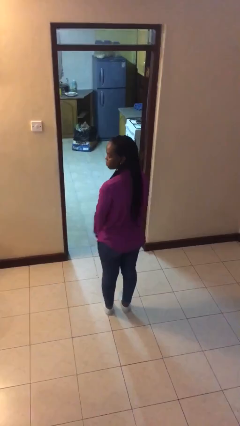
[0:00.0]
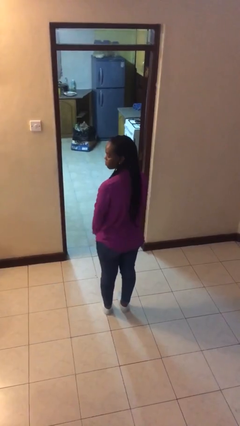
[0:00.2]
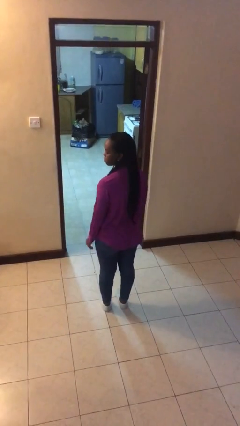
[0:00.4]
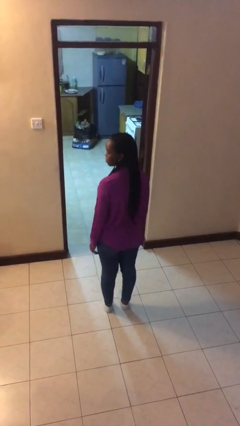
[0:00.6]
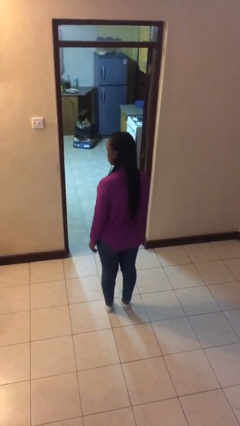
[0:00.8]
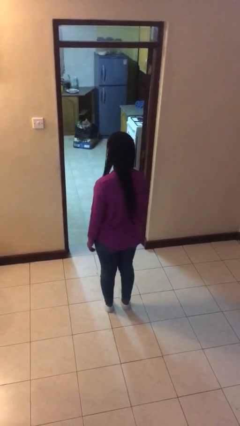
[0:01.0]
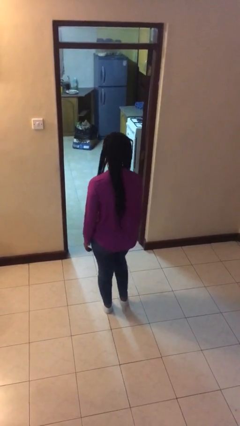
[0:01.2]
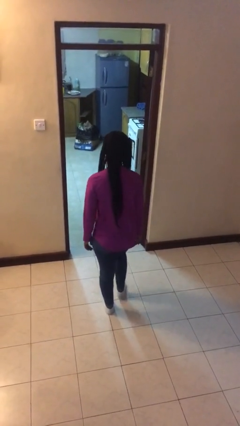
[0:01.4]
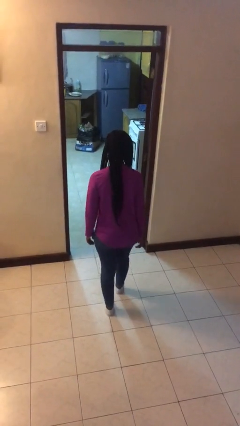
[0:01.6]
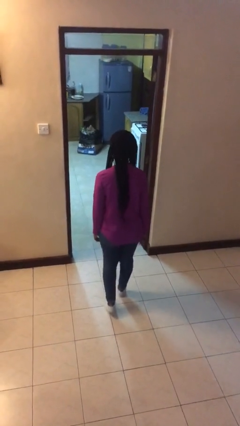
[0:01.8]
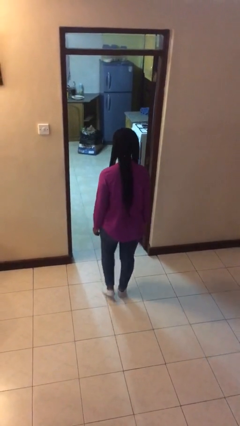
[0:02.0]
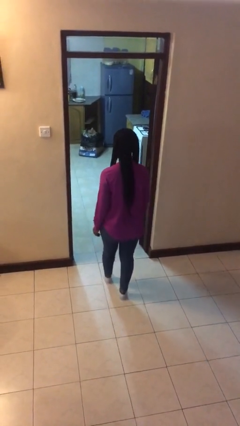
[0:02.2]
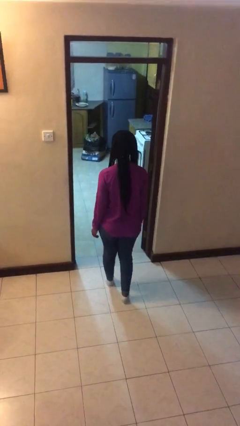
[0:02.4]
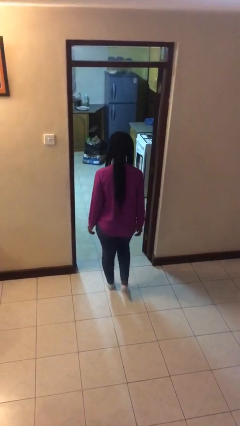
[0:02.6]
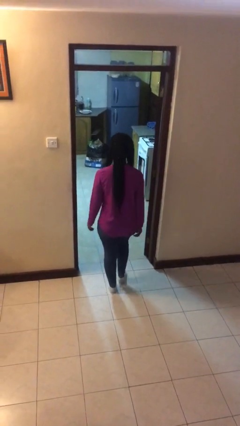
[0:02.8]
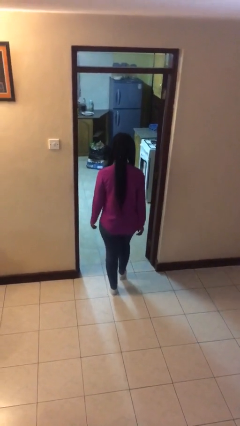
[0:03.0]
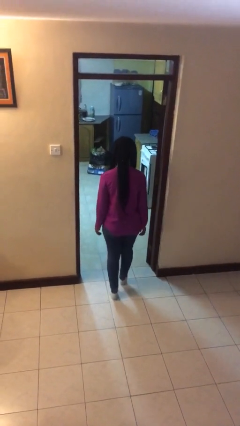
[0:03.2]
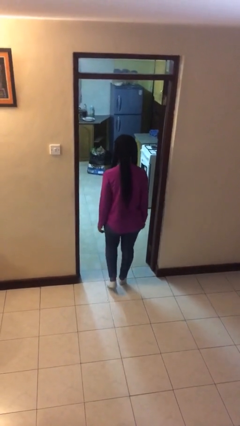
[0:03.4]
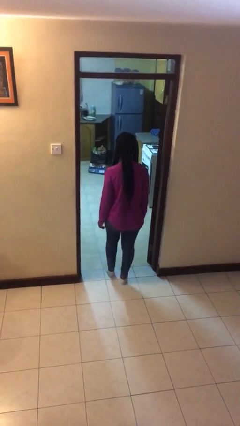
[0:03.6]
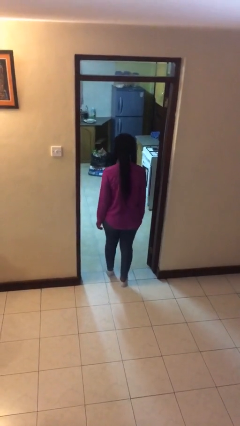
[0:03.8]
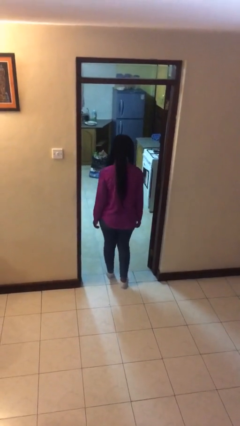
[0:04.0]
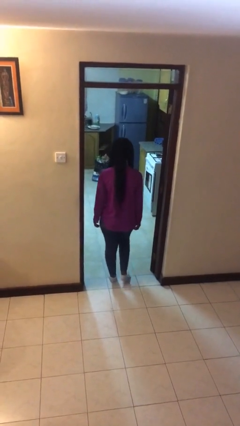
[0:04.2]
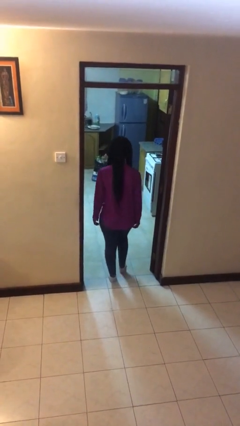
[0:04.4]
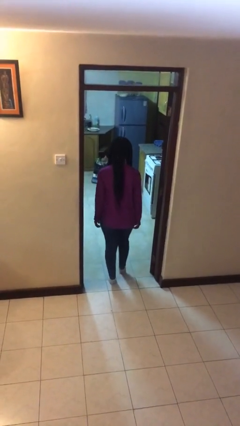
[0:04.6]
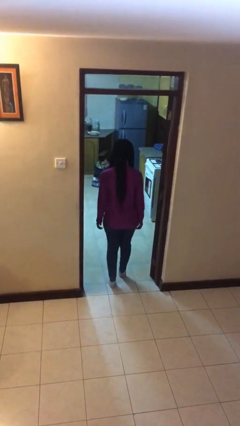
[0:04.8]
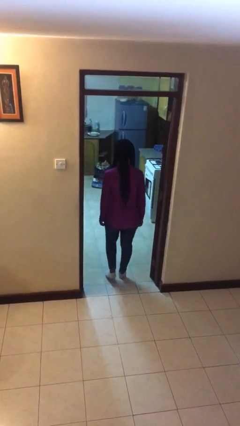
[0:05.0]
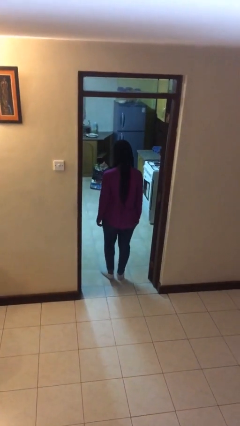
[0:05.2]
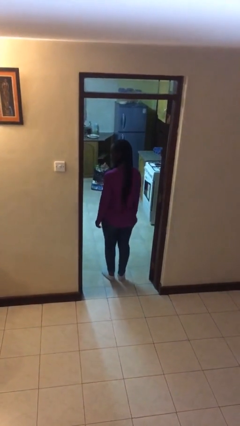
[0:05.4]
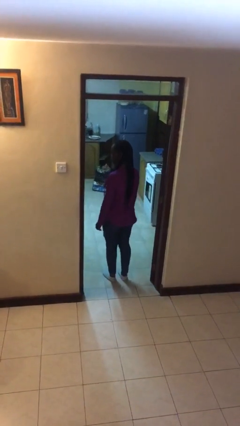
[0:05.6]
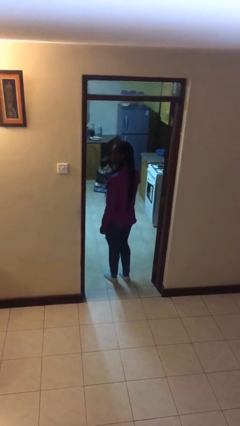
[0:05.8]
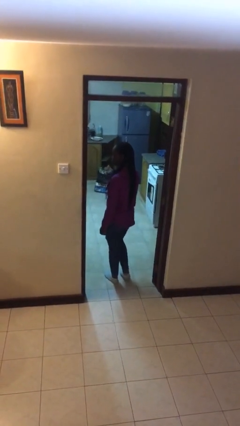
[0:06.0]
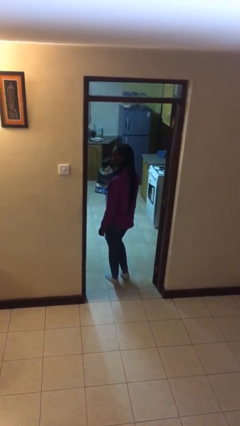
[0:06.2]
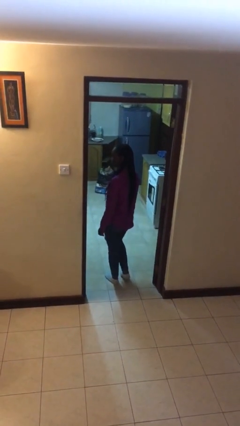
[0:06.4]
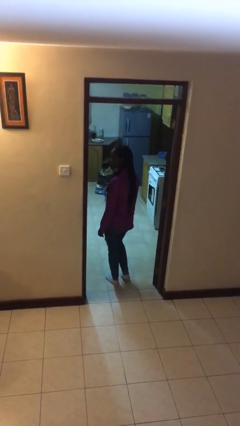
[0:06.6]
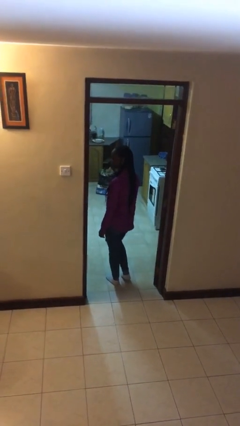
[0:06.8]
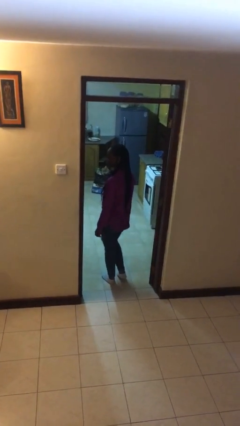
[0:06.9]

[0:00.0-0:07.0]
person exits scene through structure

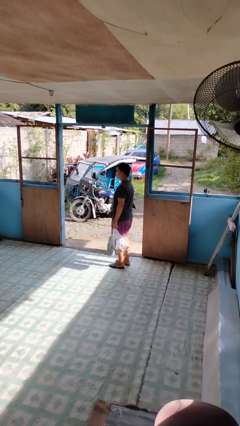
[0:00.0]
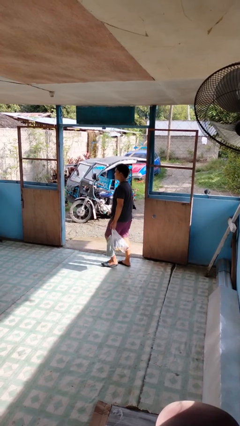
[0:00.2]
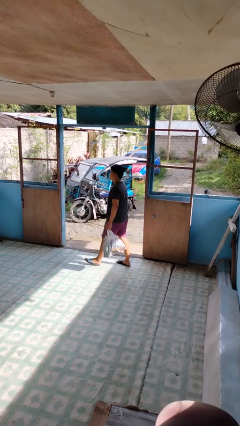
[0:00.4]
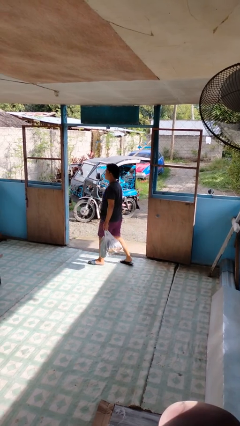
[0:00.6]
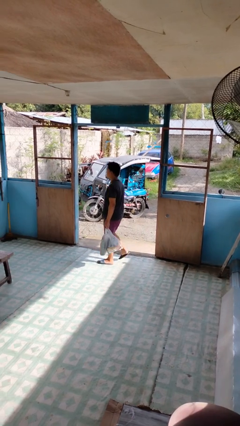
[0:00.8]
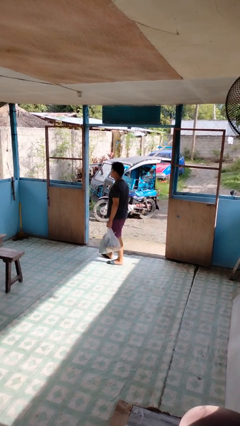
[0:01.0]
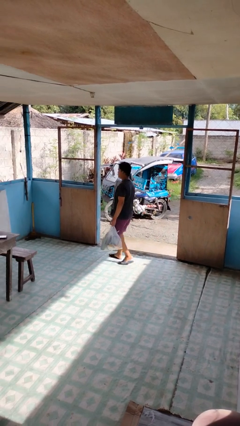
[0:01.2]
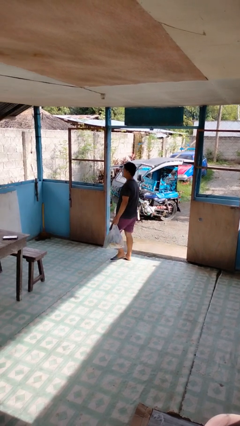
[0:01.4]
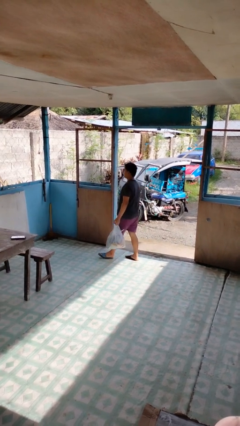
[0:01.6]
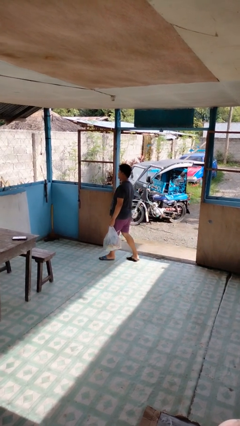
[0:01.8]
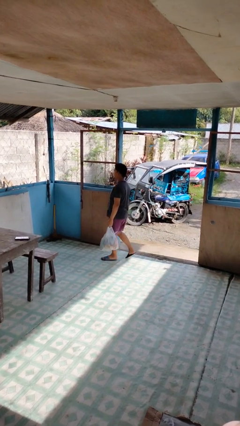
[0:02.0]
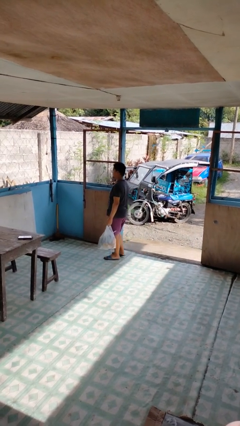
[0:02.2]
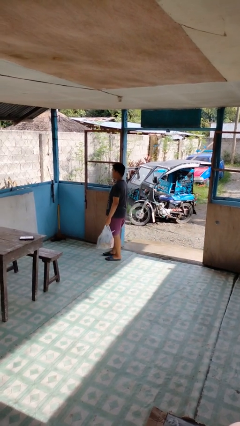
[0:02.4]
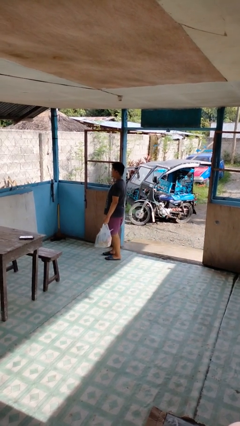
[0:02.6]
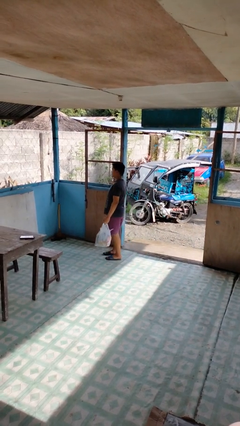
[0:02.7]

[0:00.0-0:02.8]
person carries groceries

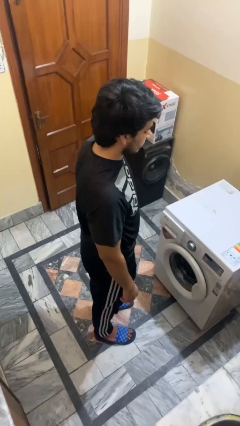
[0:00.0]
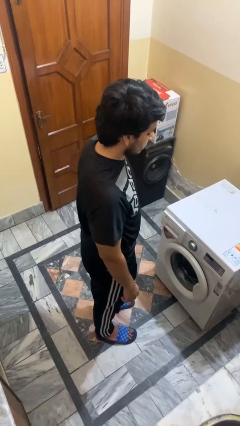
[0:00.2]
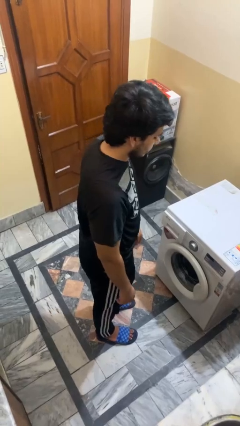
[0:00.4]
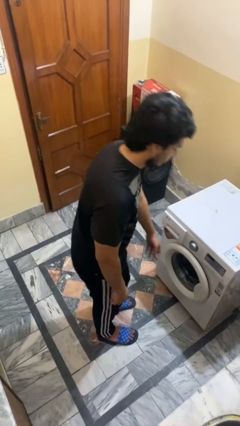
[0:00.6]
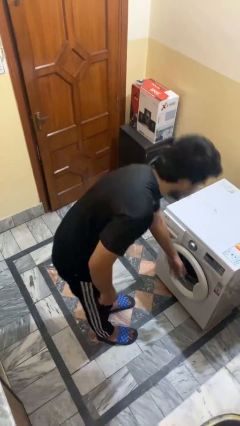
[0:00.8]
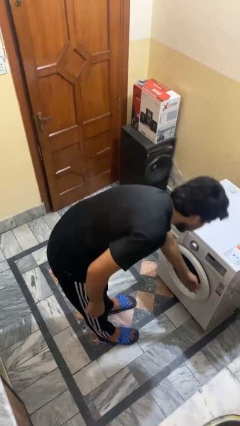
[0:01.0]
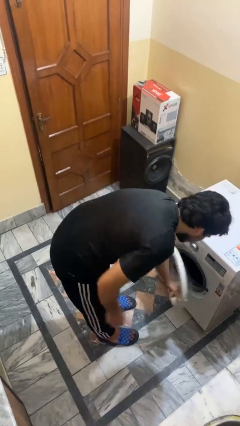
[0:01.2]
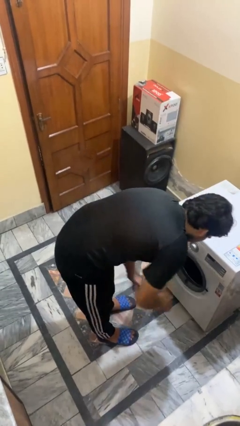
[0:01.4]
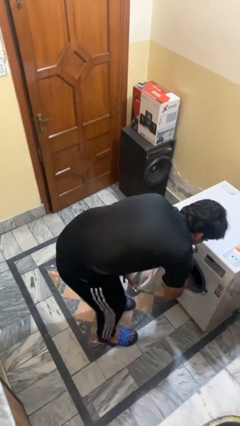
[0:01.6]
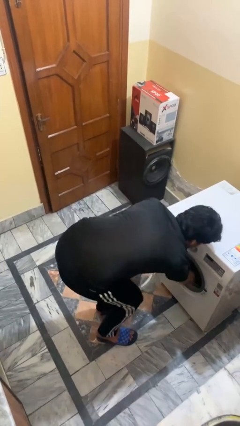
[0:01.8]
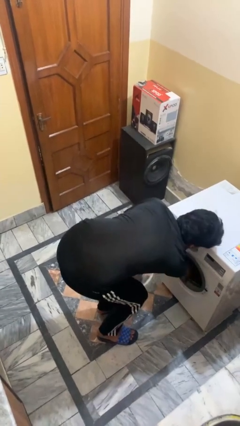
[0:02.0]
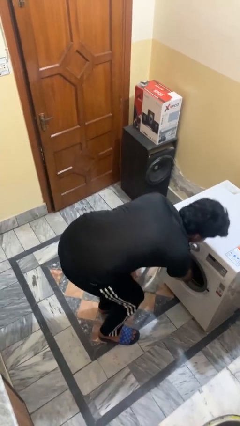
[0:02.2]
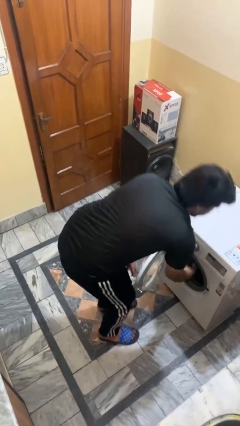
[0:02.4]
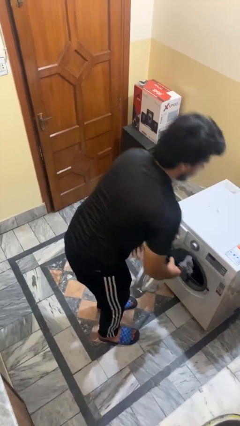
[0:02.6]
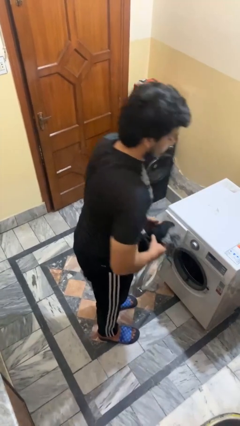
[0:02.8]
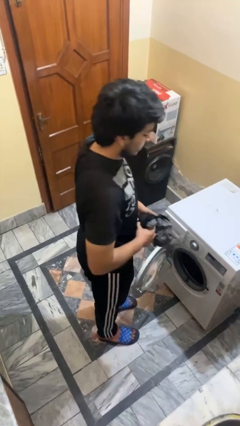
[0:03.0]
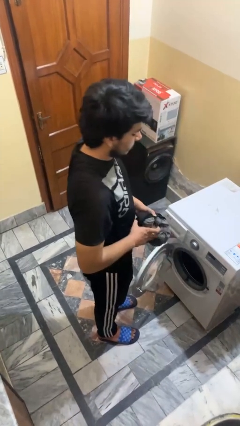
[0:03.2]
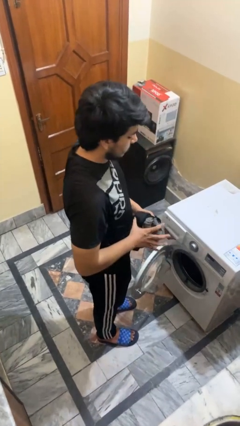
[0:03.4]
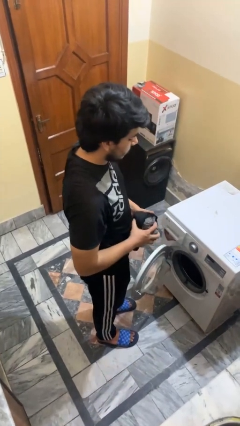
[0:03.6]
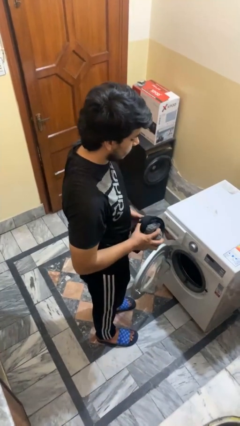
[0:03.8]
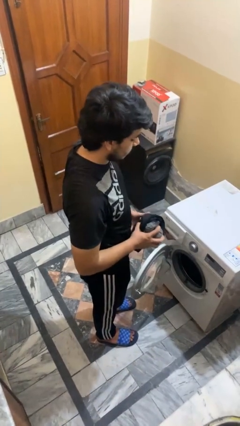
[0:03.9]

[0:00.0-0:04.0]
person unloads clotheswasher

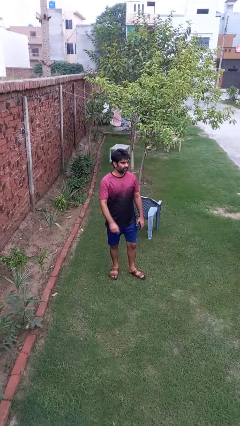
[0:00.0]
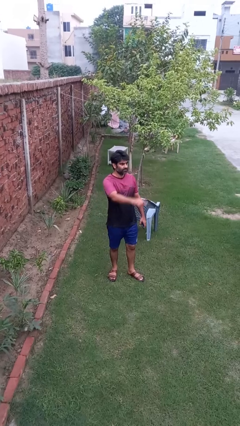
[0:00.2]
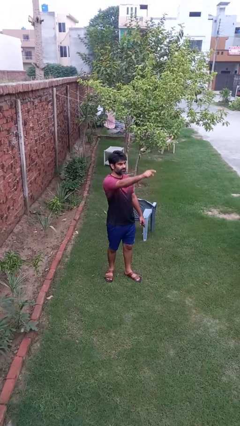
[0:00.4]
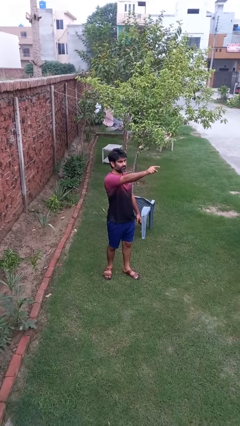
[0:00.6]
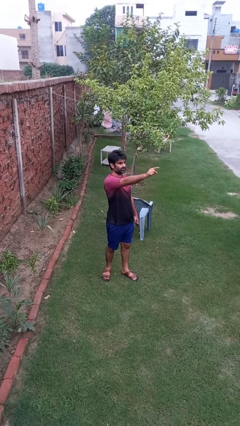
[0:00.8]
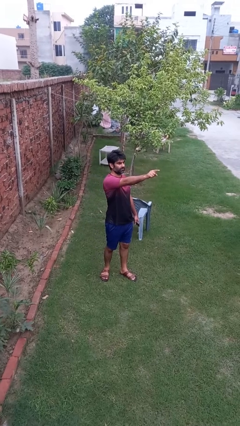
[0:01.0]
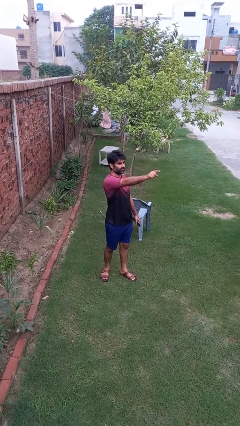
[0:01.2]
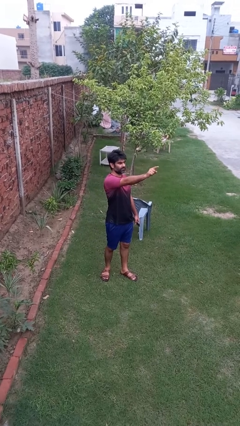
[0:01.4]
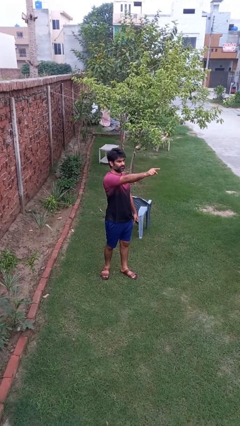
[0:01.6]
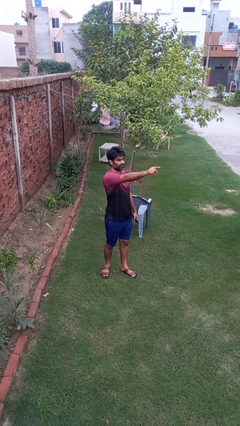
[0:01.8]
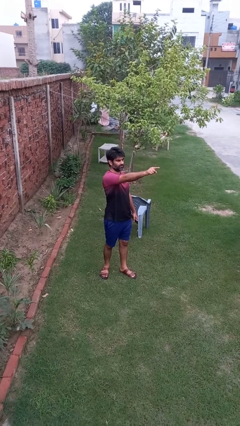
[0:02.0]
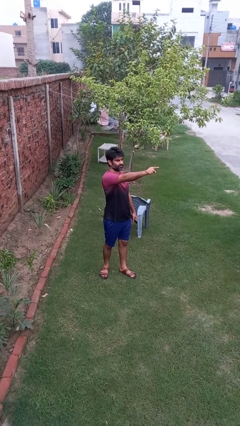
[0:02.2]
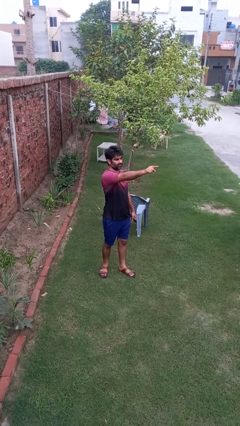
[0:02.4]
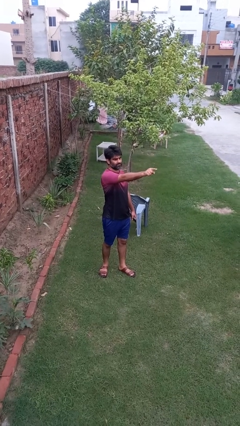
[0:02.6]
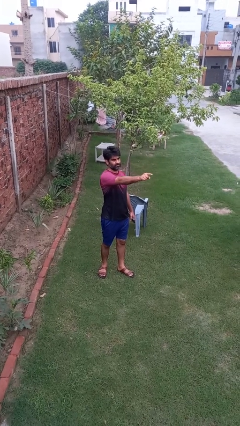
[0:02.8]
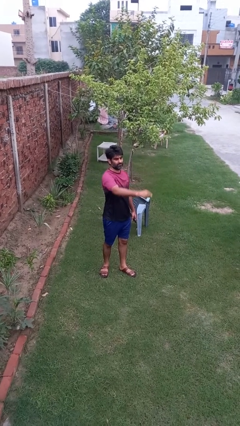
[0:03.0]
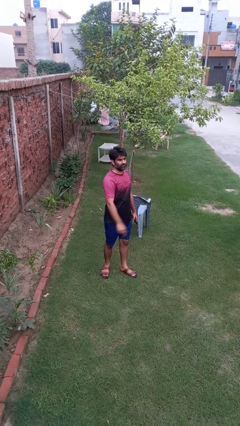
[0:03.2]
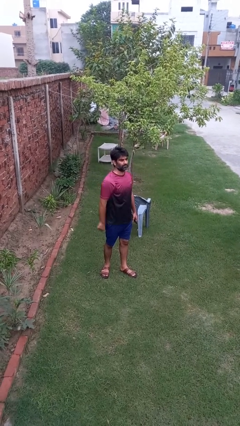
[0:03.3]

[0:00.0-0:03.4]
person points at person

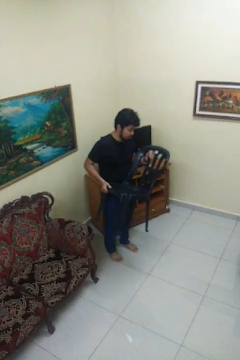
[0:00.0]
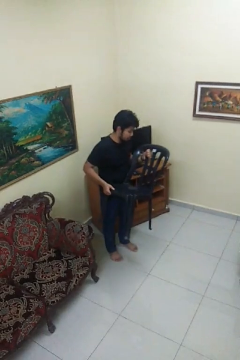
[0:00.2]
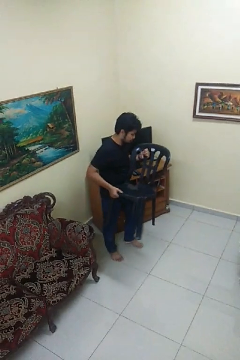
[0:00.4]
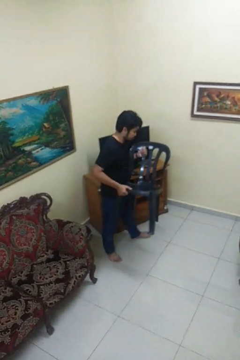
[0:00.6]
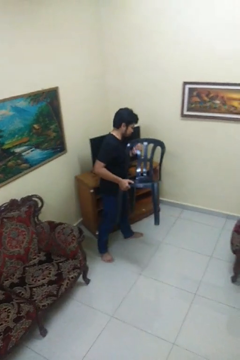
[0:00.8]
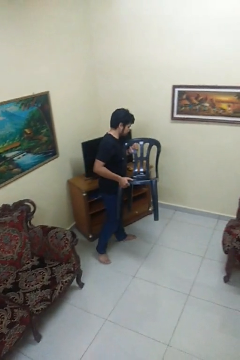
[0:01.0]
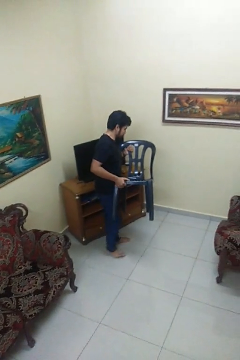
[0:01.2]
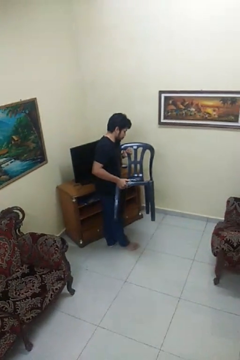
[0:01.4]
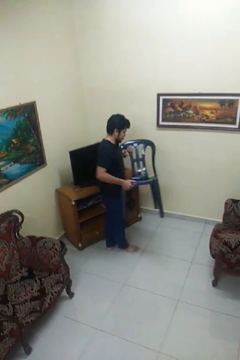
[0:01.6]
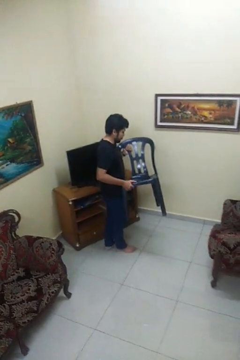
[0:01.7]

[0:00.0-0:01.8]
person carries furniture
